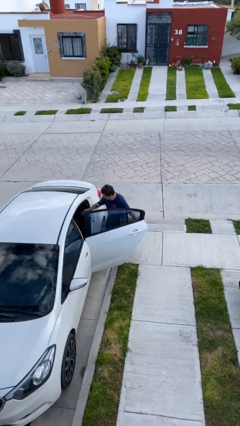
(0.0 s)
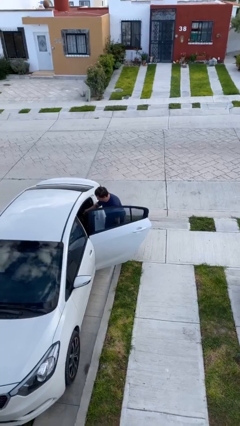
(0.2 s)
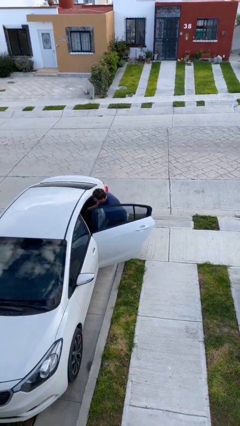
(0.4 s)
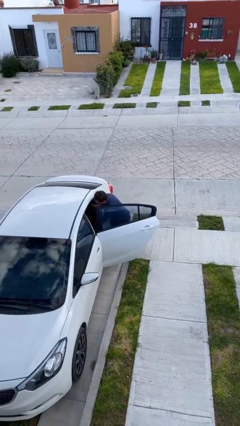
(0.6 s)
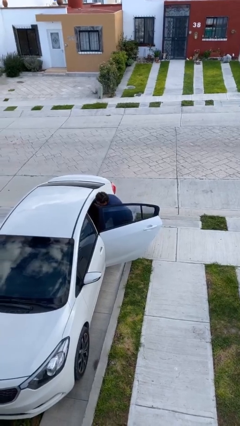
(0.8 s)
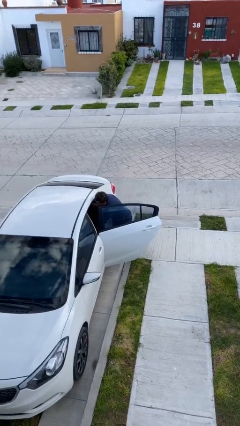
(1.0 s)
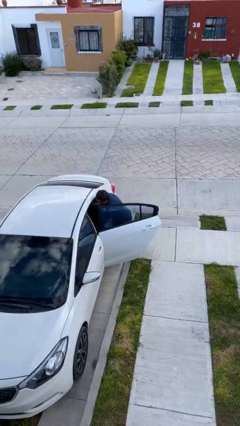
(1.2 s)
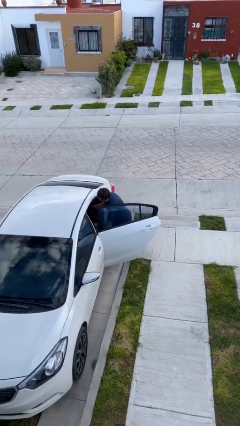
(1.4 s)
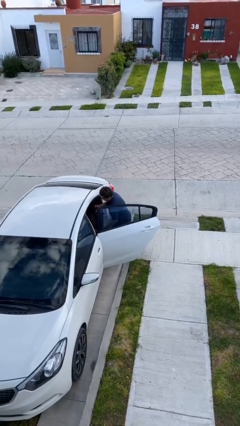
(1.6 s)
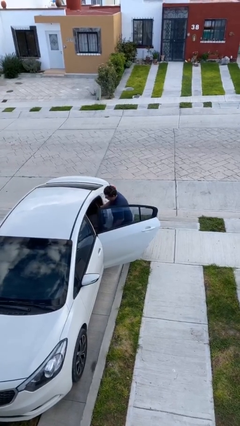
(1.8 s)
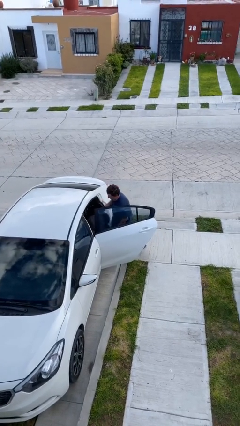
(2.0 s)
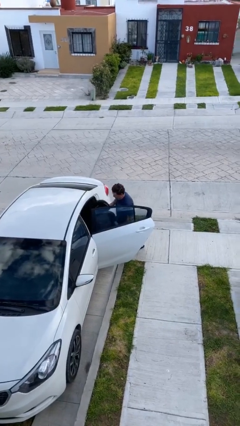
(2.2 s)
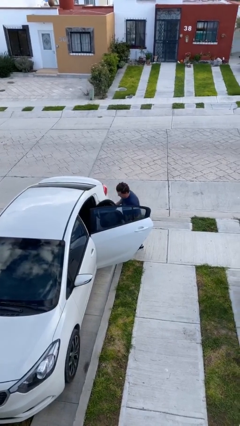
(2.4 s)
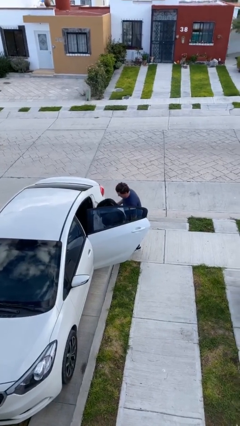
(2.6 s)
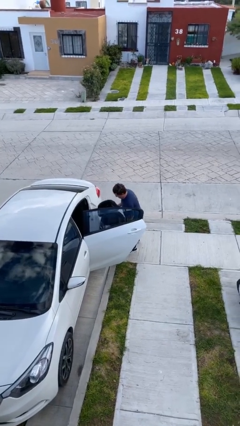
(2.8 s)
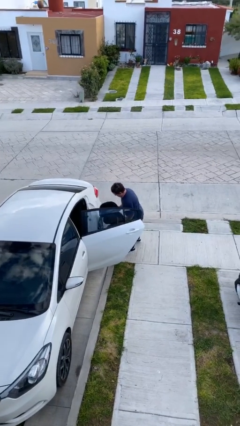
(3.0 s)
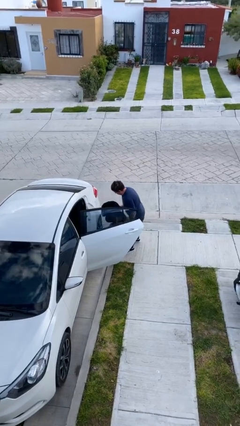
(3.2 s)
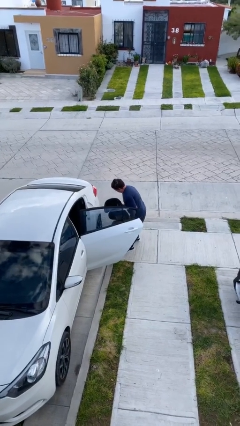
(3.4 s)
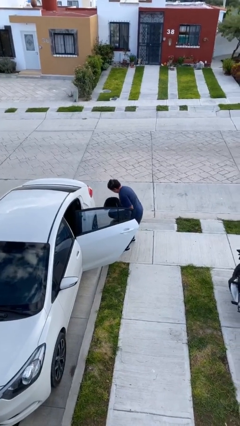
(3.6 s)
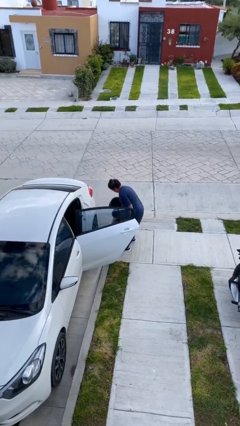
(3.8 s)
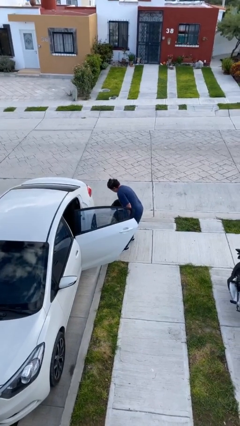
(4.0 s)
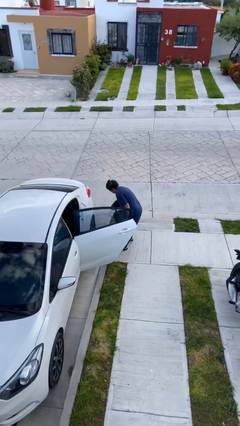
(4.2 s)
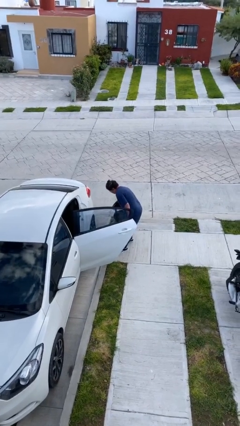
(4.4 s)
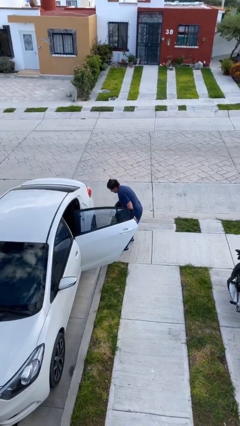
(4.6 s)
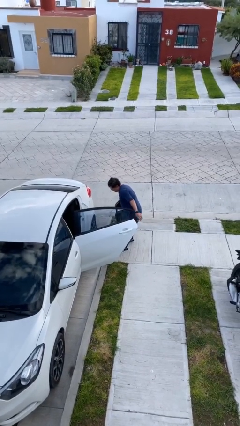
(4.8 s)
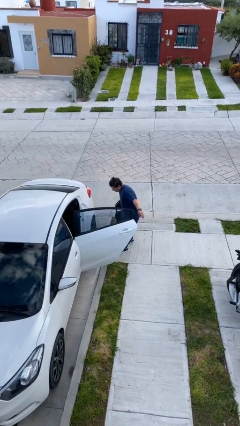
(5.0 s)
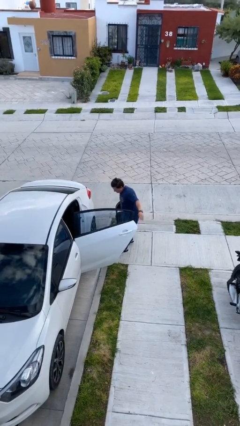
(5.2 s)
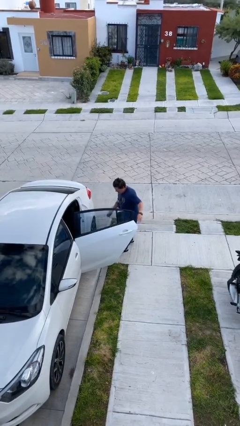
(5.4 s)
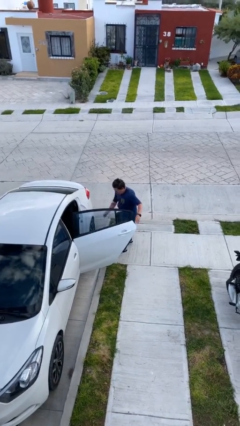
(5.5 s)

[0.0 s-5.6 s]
person unloads car

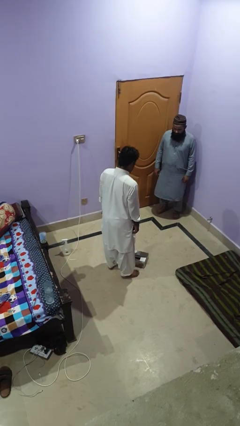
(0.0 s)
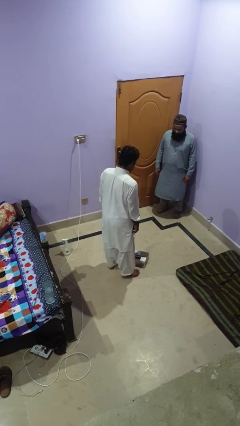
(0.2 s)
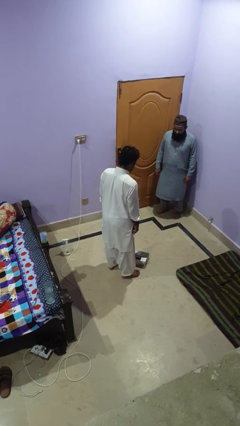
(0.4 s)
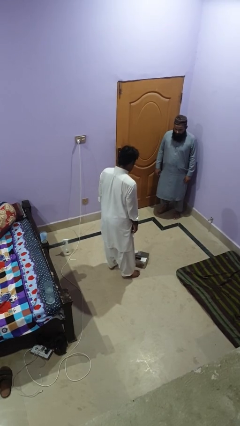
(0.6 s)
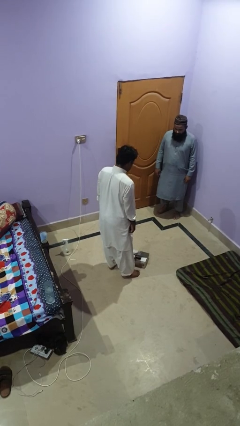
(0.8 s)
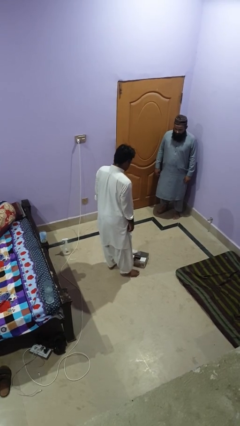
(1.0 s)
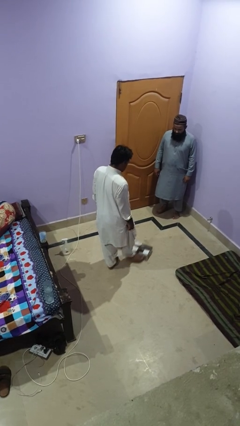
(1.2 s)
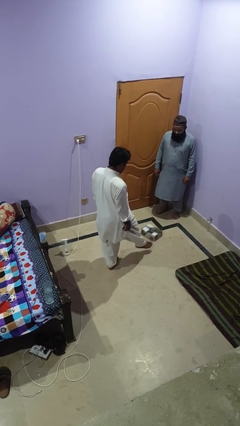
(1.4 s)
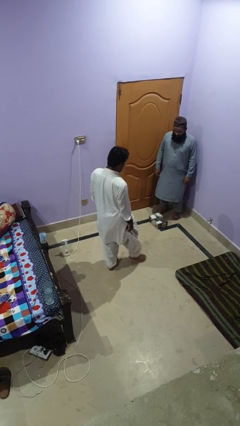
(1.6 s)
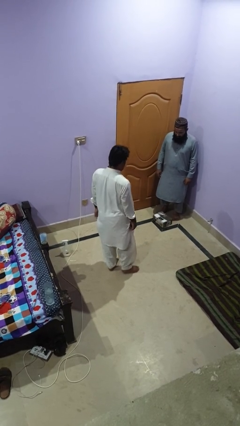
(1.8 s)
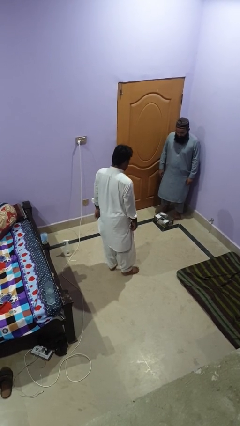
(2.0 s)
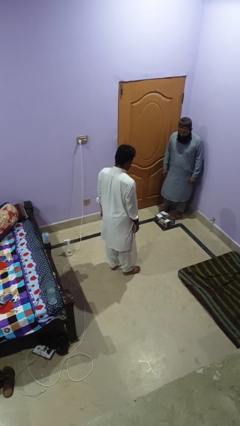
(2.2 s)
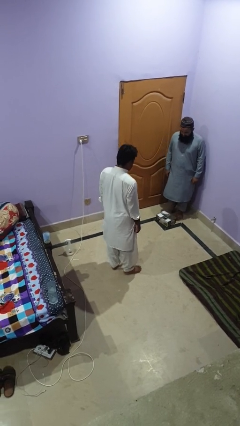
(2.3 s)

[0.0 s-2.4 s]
person kicks object to person

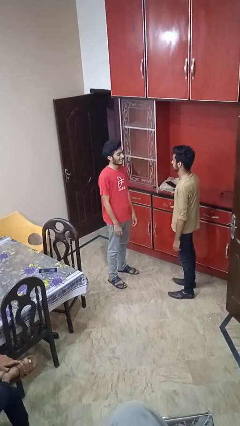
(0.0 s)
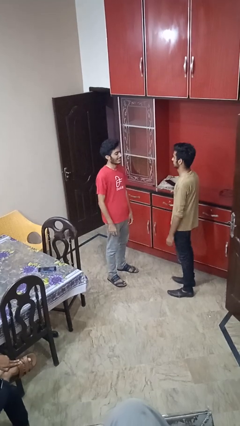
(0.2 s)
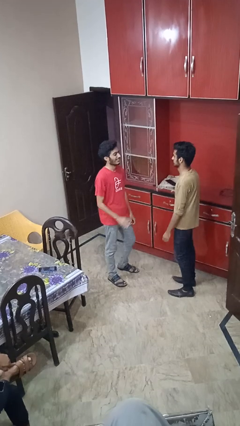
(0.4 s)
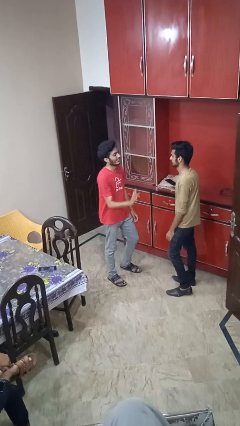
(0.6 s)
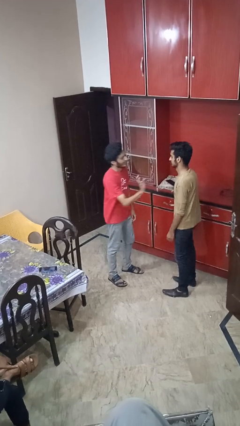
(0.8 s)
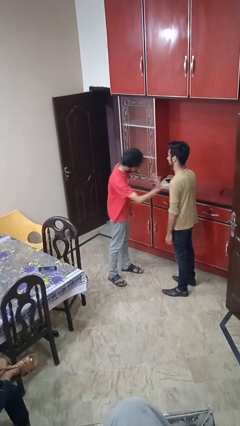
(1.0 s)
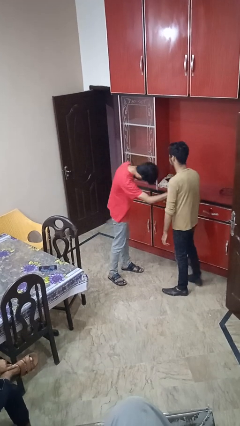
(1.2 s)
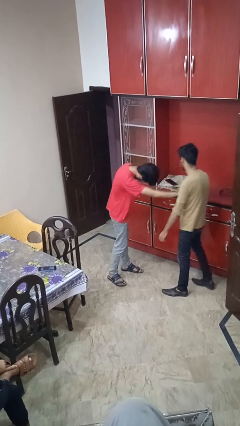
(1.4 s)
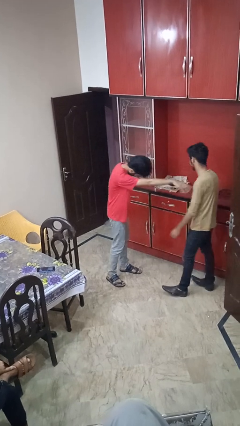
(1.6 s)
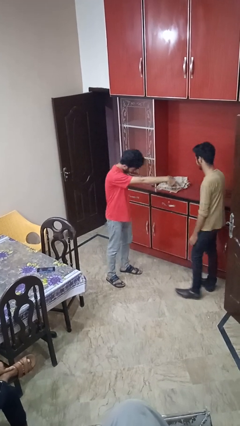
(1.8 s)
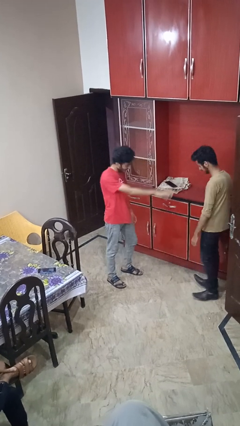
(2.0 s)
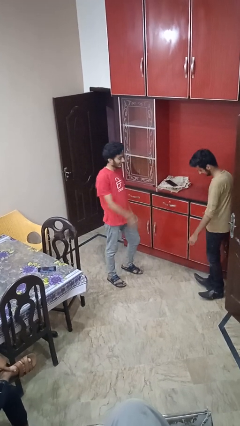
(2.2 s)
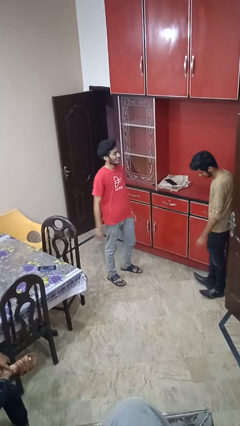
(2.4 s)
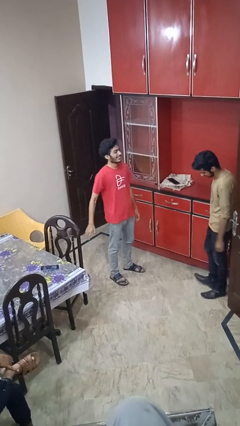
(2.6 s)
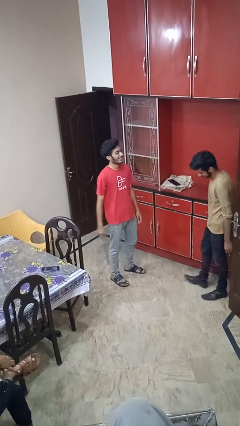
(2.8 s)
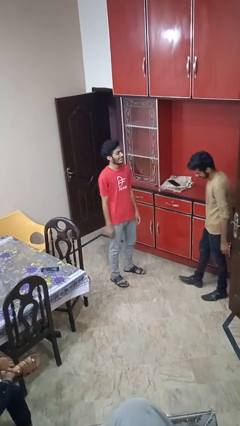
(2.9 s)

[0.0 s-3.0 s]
person shoves person

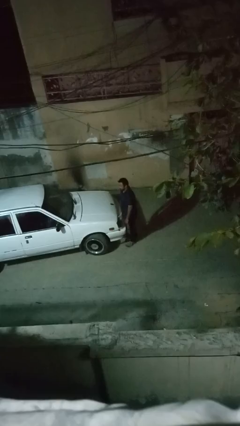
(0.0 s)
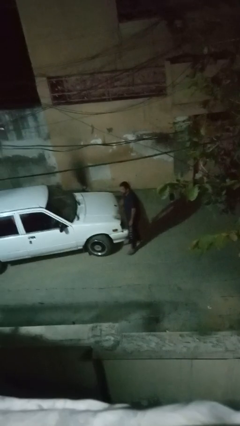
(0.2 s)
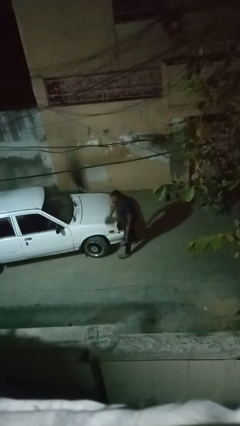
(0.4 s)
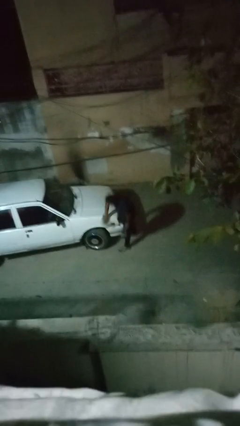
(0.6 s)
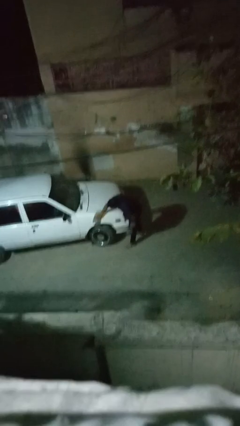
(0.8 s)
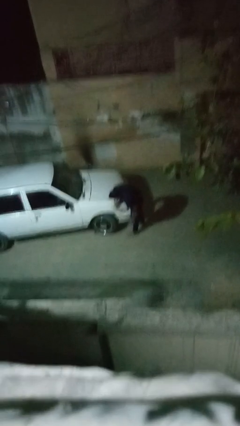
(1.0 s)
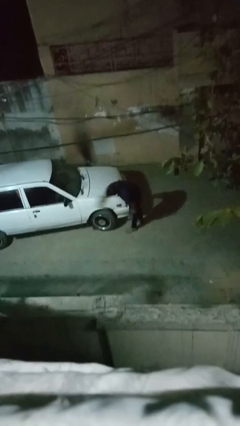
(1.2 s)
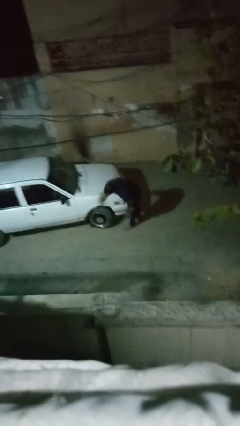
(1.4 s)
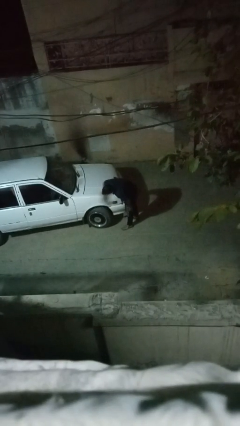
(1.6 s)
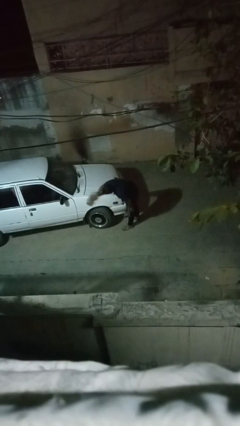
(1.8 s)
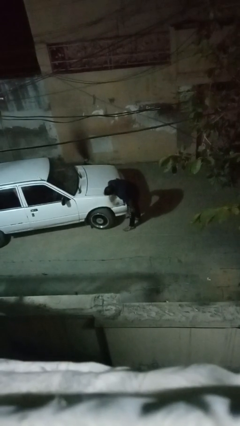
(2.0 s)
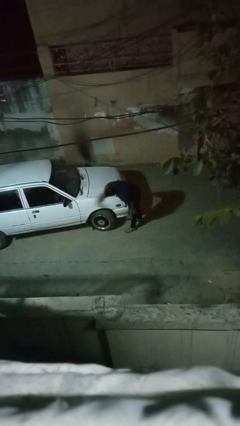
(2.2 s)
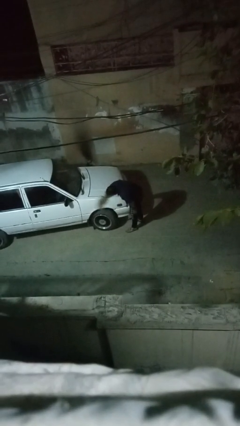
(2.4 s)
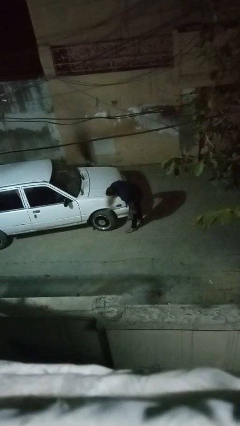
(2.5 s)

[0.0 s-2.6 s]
person polishes car with rag

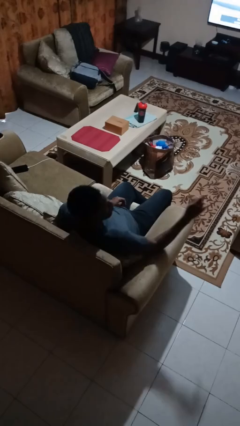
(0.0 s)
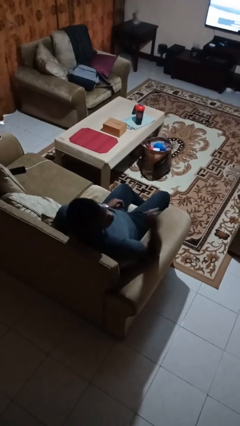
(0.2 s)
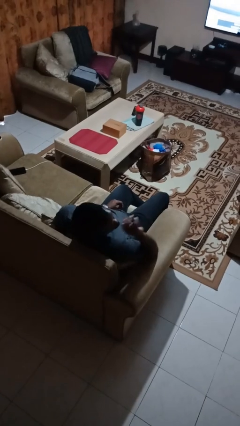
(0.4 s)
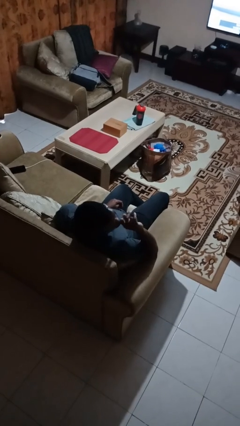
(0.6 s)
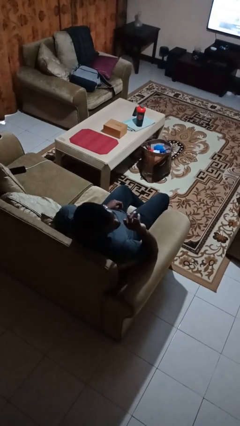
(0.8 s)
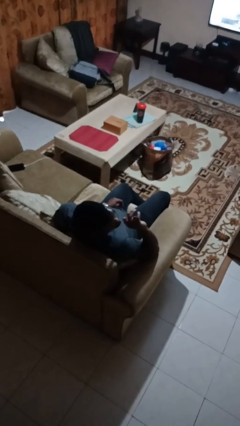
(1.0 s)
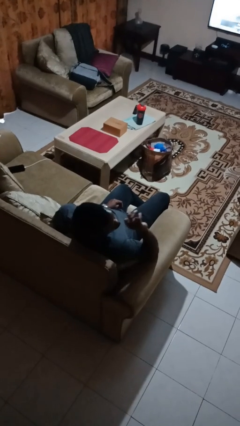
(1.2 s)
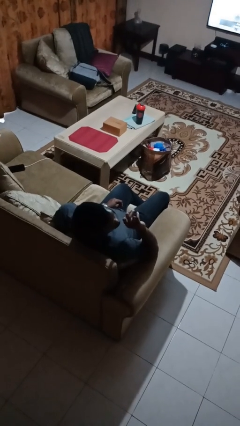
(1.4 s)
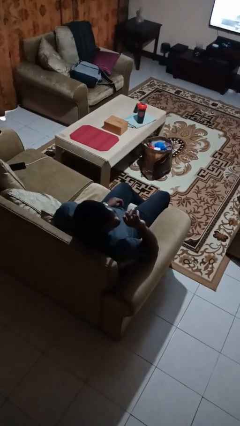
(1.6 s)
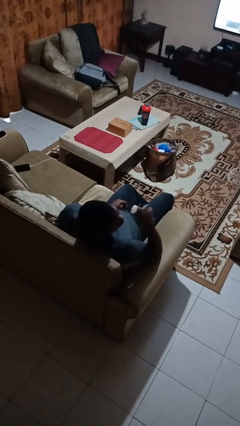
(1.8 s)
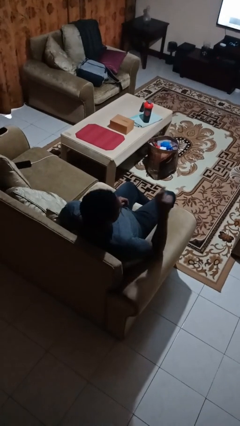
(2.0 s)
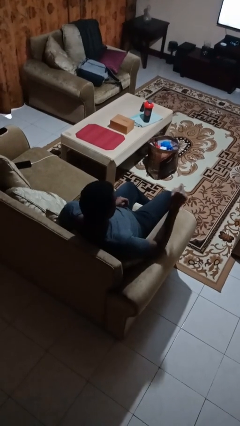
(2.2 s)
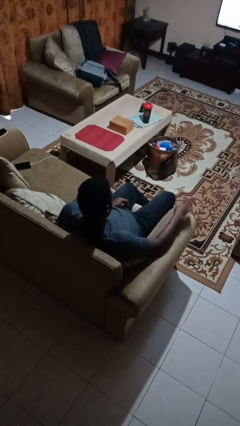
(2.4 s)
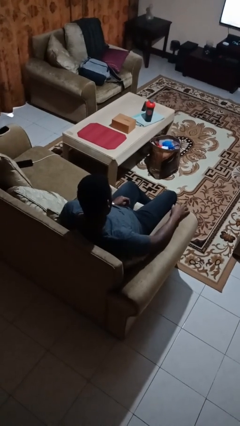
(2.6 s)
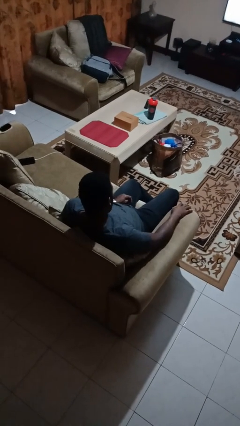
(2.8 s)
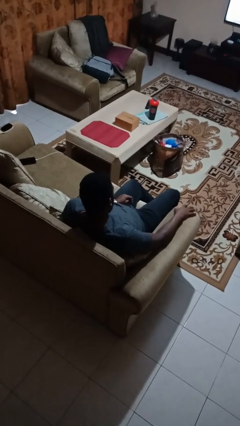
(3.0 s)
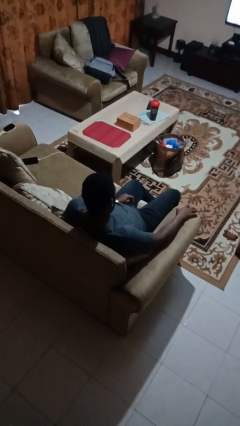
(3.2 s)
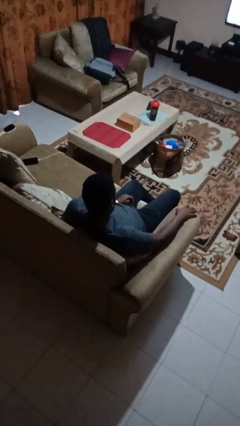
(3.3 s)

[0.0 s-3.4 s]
person gestures be quiet
